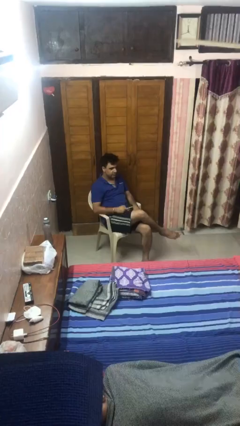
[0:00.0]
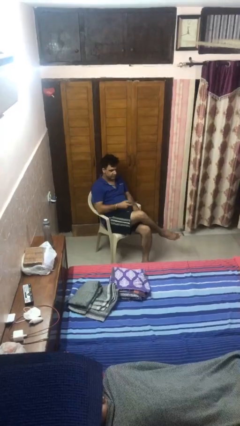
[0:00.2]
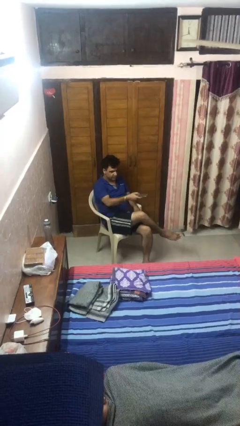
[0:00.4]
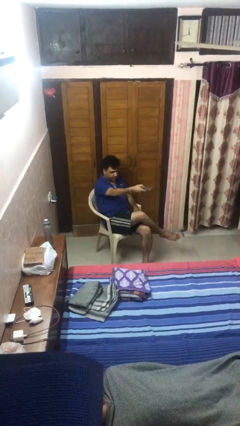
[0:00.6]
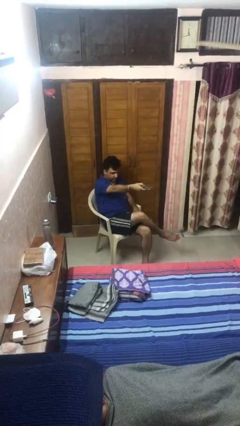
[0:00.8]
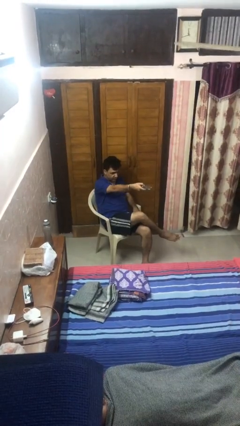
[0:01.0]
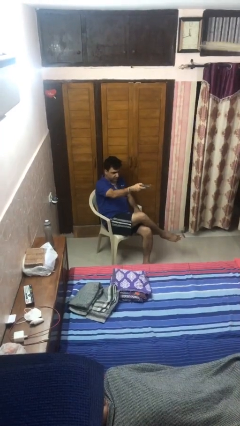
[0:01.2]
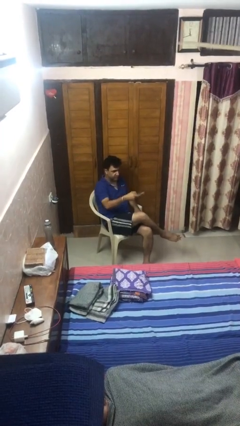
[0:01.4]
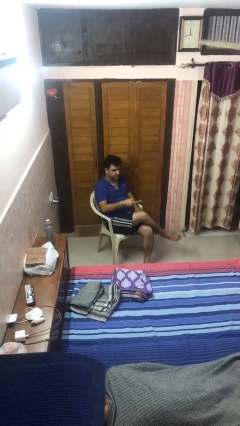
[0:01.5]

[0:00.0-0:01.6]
person uses television remote

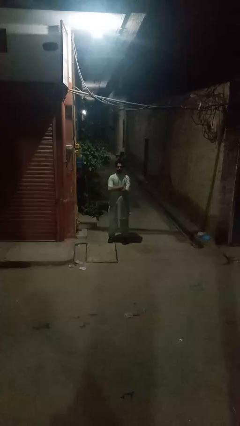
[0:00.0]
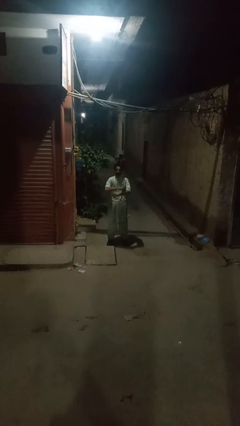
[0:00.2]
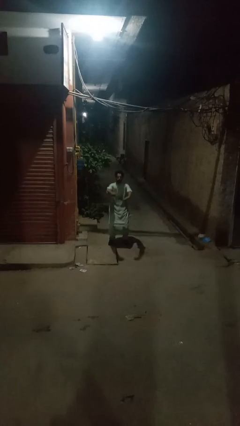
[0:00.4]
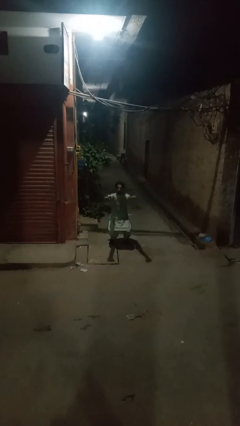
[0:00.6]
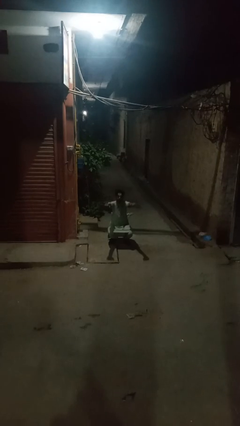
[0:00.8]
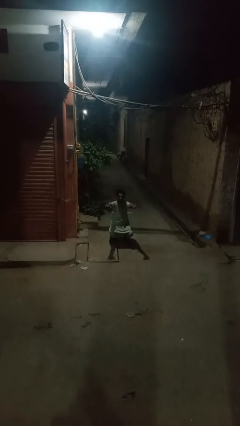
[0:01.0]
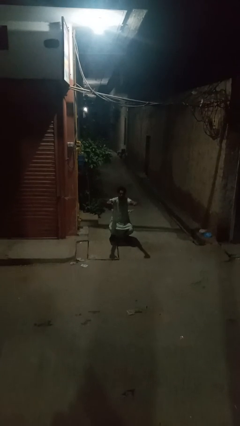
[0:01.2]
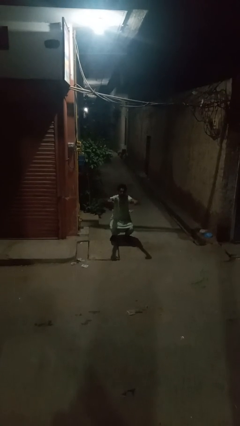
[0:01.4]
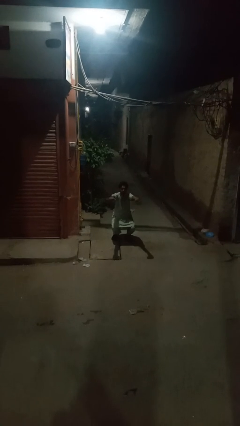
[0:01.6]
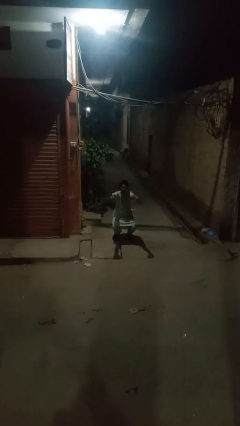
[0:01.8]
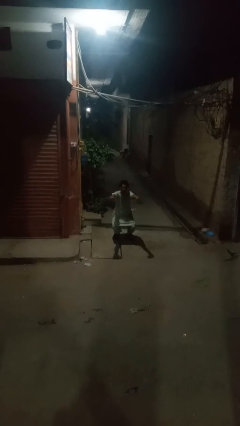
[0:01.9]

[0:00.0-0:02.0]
person squats

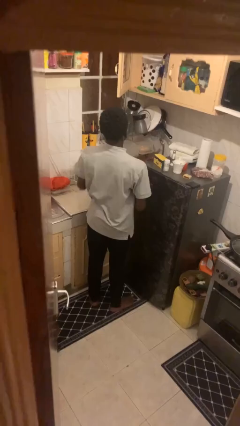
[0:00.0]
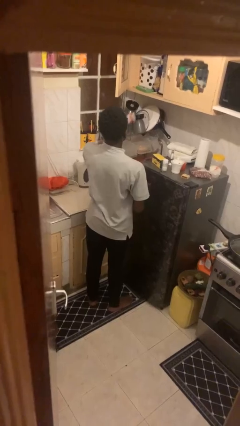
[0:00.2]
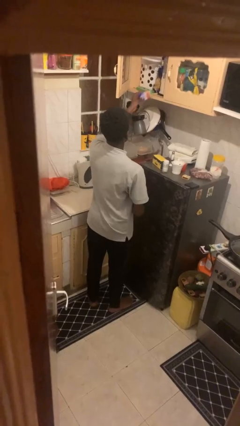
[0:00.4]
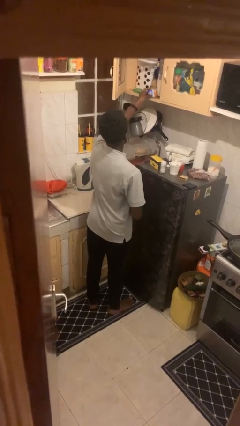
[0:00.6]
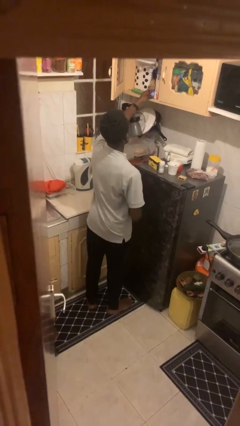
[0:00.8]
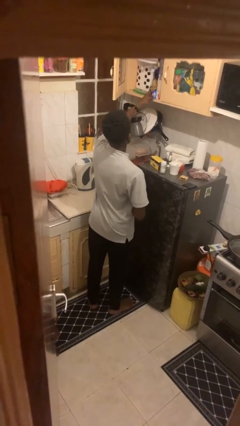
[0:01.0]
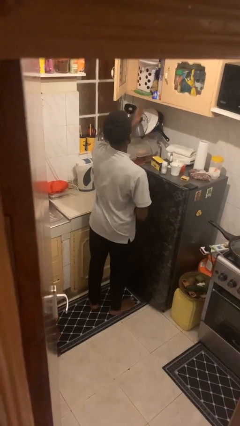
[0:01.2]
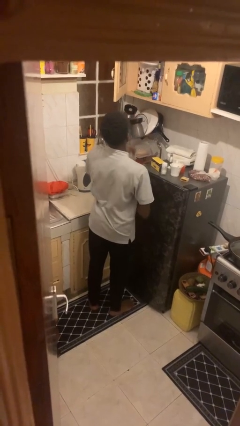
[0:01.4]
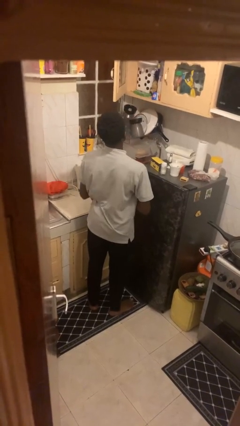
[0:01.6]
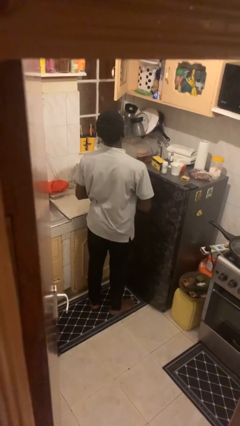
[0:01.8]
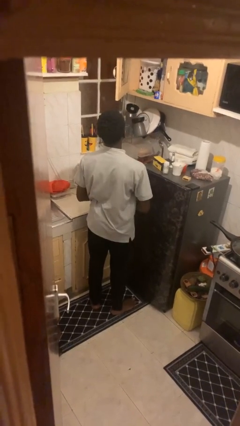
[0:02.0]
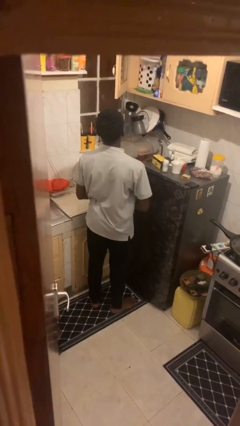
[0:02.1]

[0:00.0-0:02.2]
person puts down object into cabinet

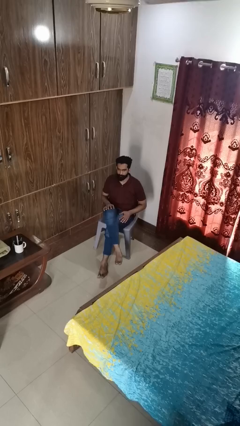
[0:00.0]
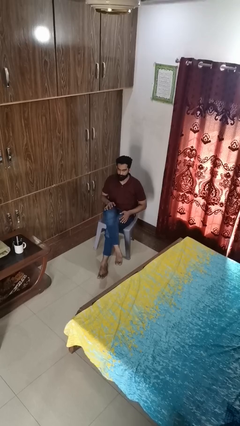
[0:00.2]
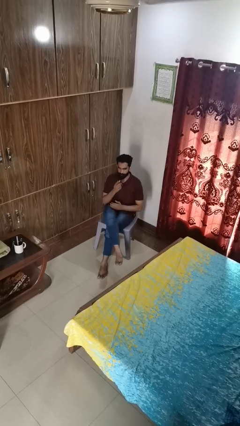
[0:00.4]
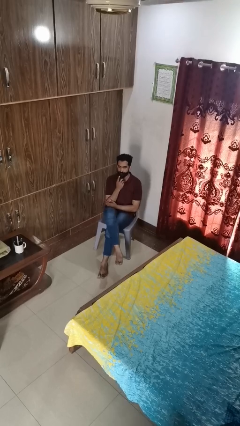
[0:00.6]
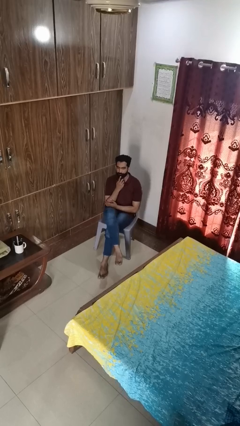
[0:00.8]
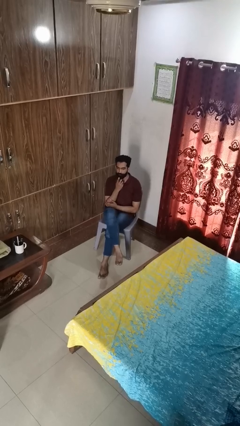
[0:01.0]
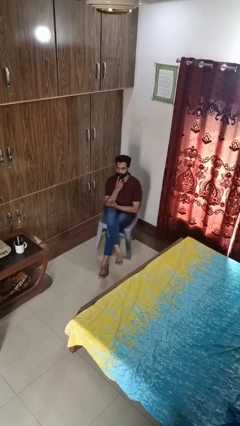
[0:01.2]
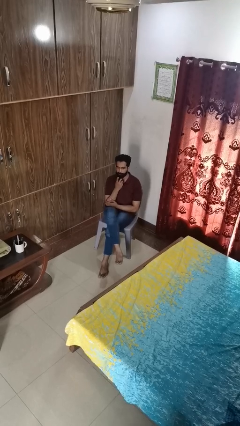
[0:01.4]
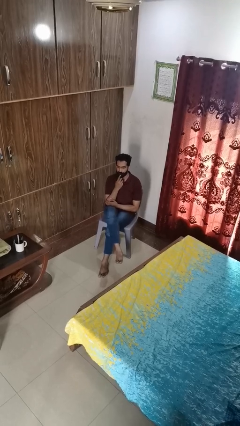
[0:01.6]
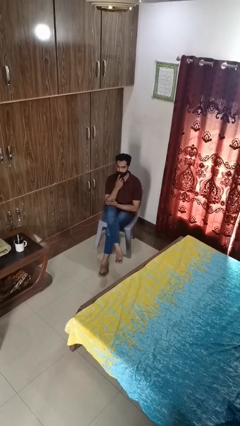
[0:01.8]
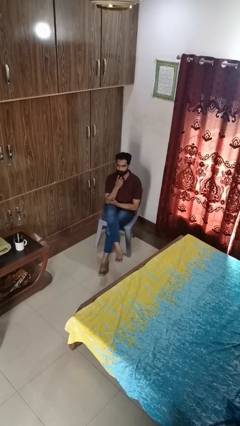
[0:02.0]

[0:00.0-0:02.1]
person strokes chin

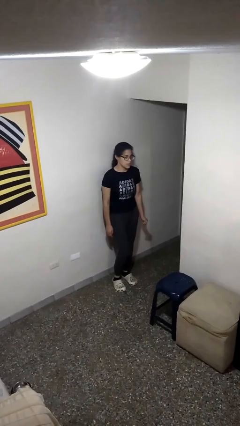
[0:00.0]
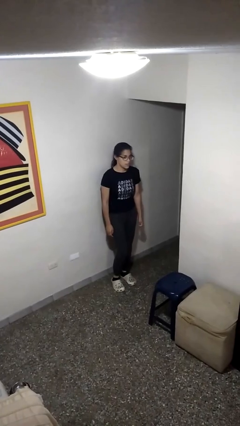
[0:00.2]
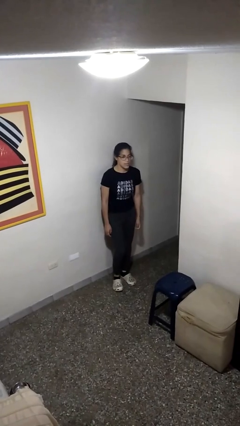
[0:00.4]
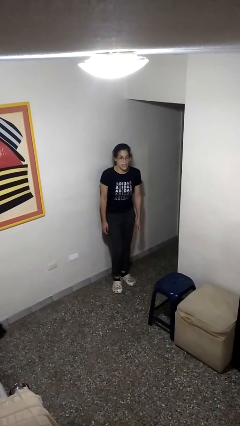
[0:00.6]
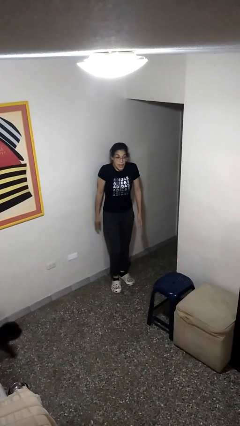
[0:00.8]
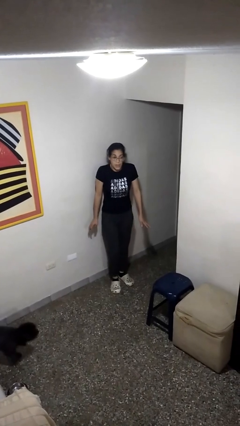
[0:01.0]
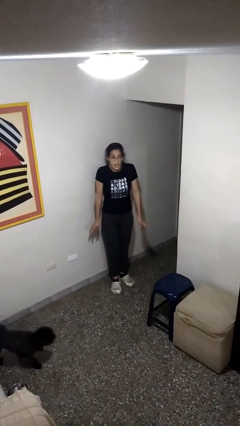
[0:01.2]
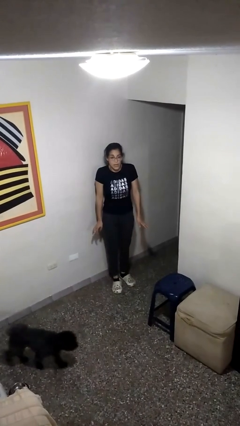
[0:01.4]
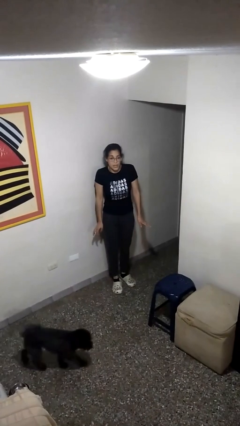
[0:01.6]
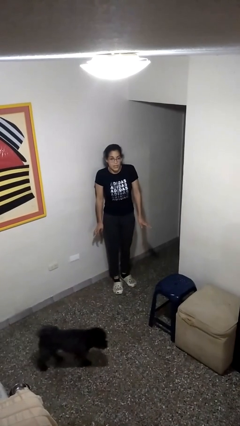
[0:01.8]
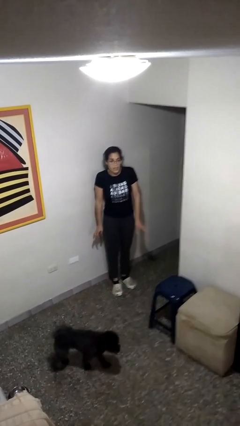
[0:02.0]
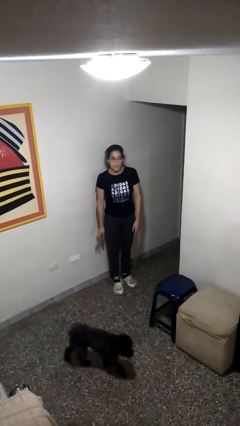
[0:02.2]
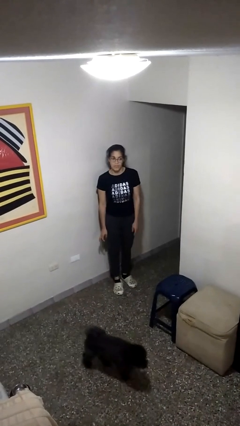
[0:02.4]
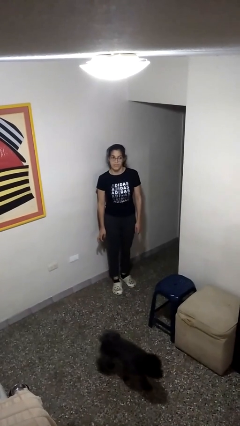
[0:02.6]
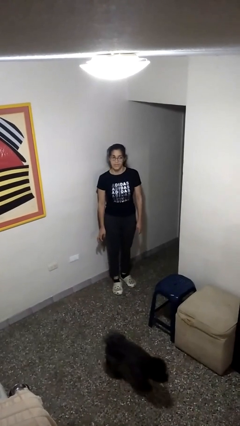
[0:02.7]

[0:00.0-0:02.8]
person shrugs

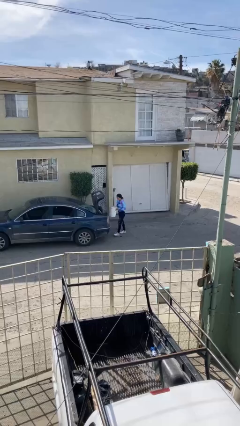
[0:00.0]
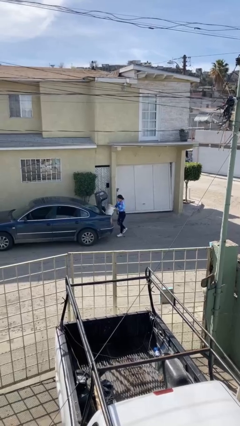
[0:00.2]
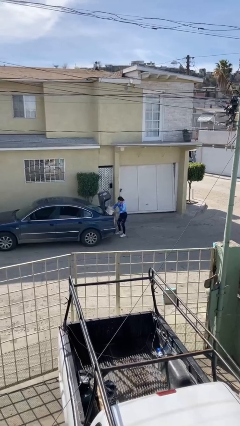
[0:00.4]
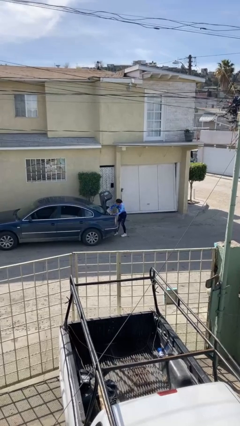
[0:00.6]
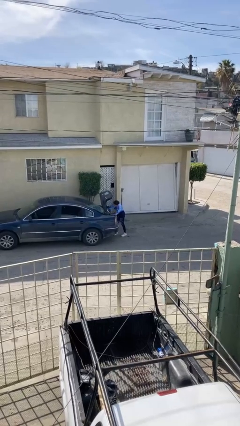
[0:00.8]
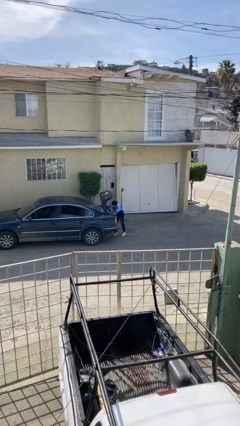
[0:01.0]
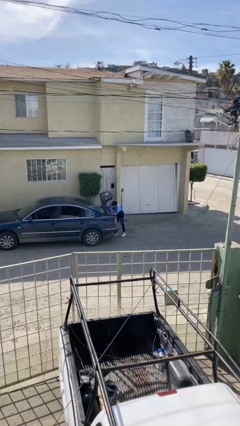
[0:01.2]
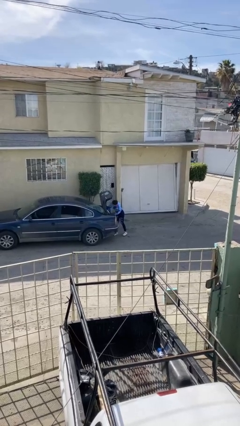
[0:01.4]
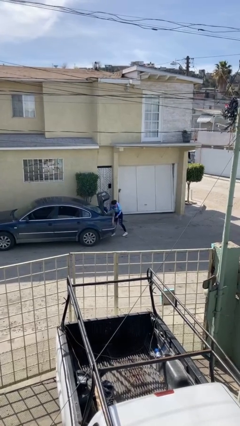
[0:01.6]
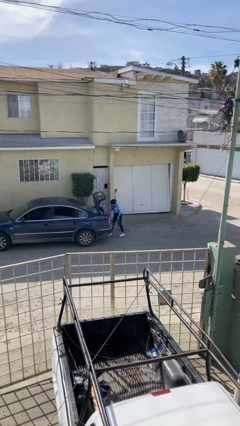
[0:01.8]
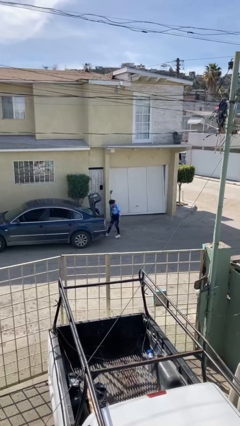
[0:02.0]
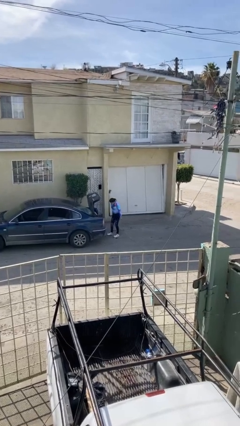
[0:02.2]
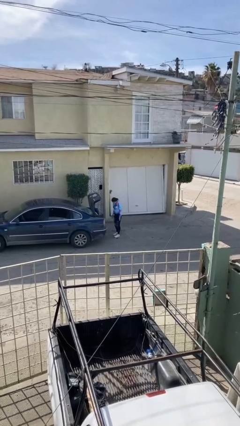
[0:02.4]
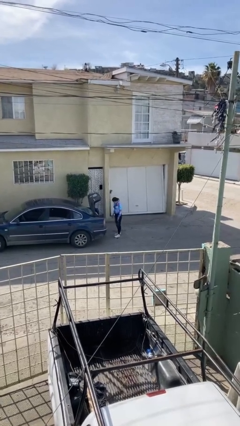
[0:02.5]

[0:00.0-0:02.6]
person loads car

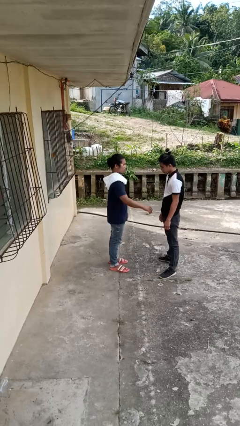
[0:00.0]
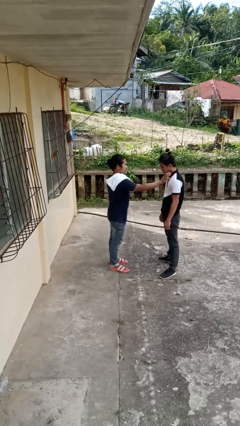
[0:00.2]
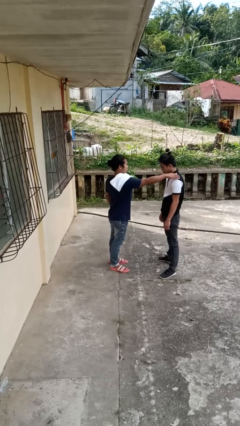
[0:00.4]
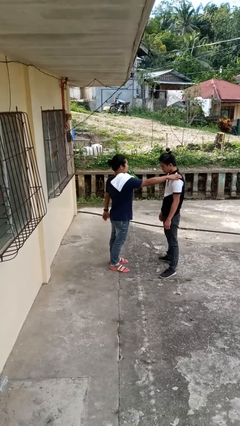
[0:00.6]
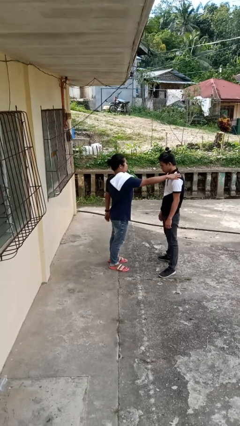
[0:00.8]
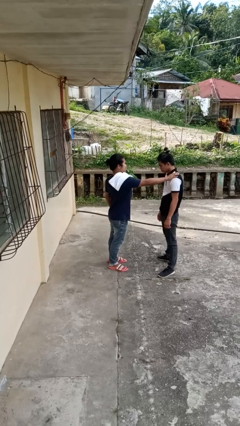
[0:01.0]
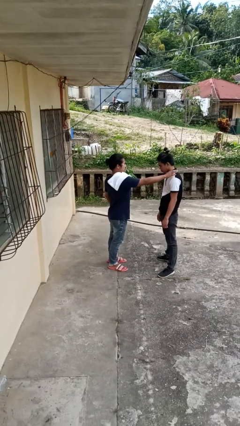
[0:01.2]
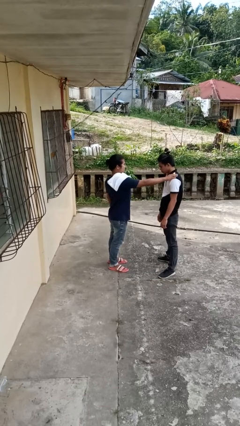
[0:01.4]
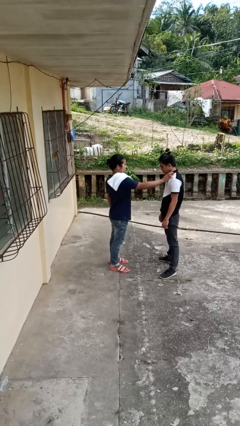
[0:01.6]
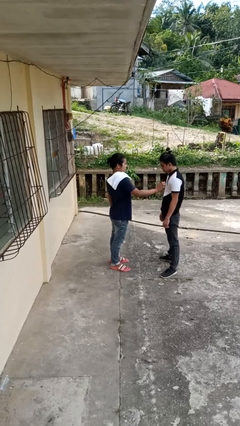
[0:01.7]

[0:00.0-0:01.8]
person pounds shoulders of person

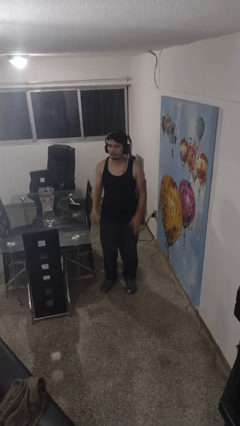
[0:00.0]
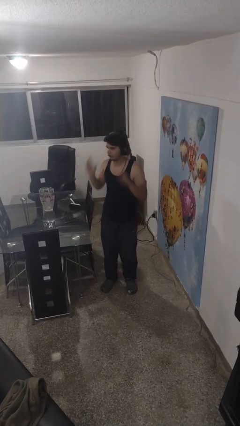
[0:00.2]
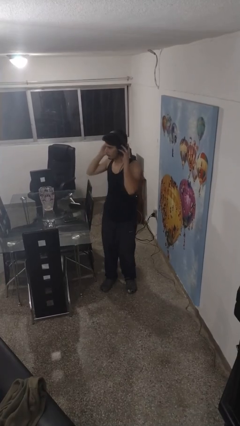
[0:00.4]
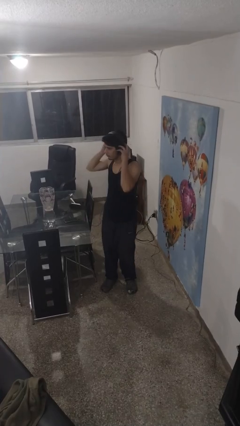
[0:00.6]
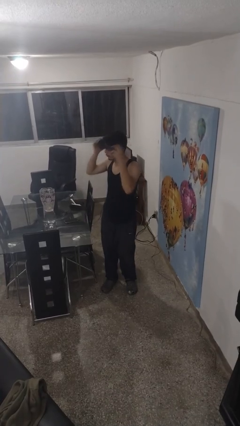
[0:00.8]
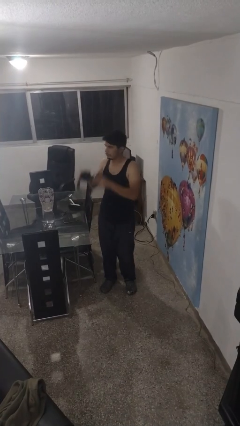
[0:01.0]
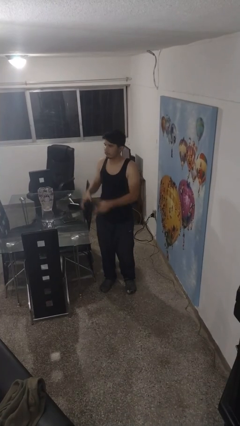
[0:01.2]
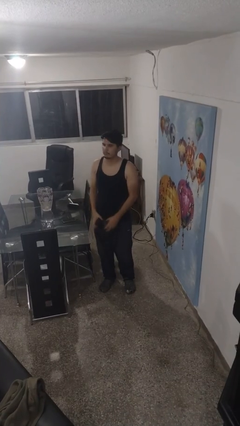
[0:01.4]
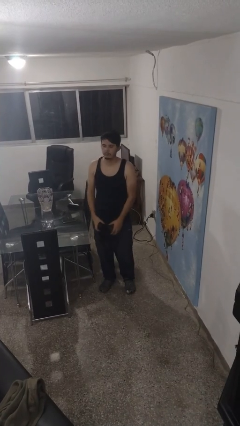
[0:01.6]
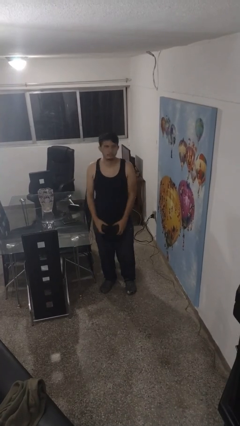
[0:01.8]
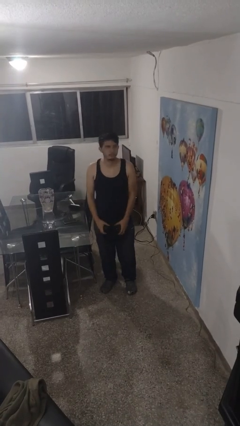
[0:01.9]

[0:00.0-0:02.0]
person takes off headphones
